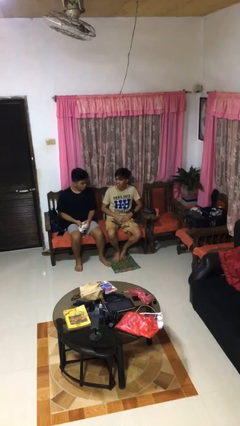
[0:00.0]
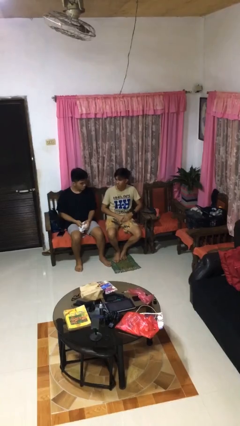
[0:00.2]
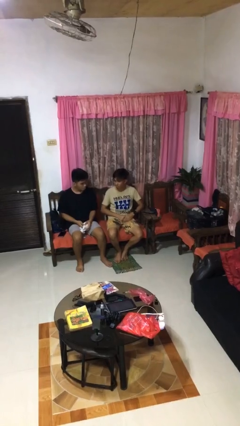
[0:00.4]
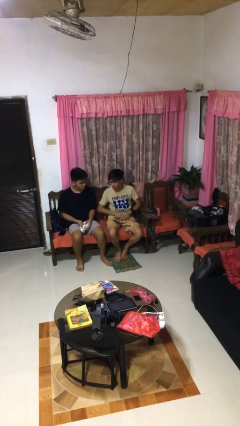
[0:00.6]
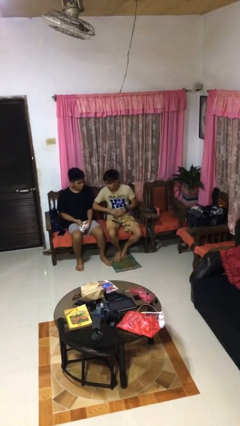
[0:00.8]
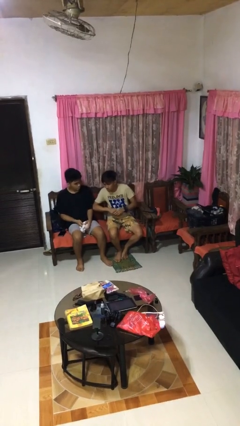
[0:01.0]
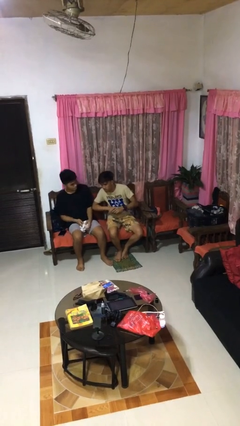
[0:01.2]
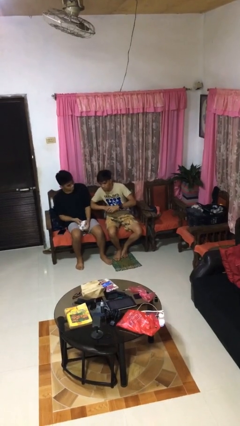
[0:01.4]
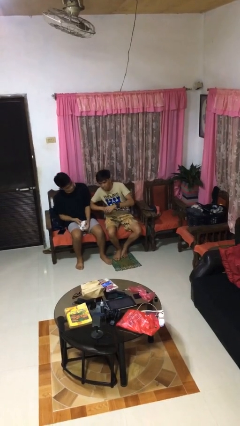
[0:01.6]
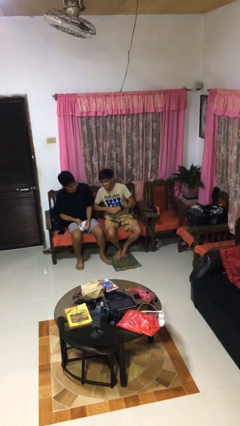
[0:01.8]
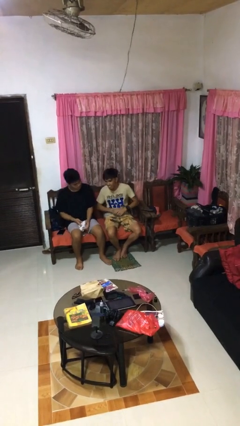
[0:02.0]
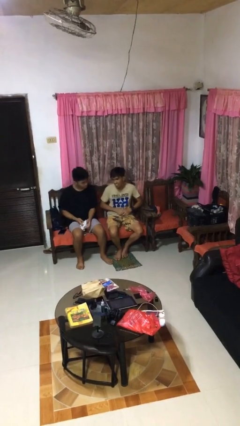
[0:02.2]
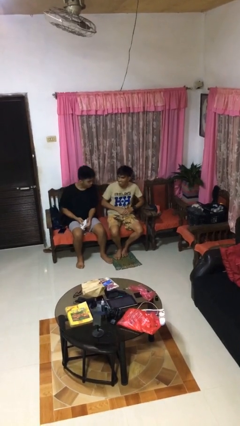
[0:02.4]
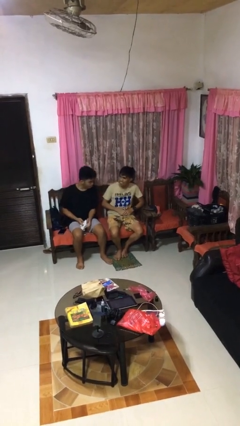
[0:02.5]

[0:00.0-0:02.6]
person nudges person with elbow

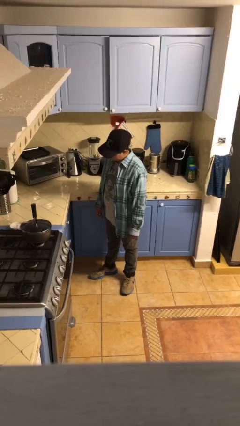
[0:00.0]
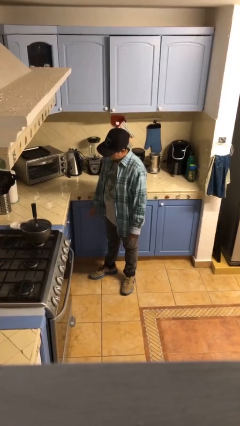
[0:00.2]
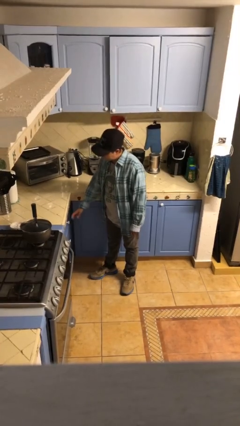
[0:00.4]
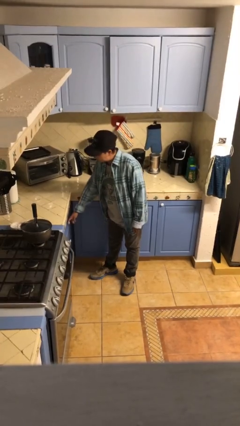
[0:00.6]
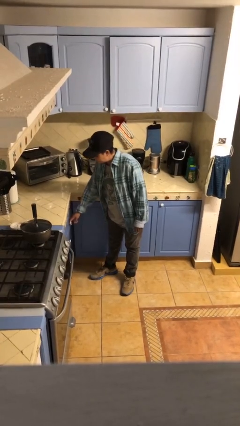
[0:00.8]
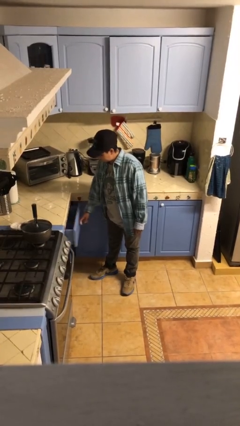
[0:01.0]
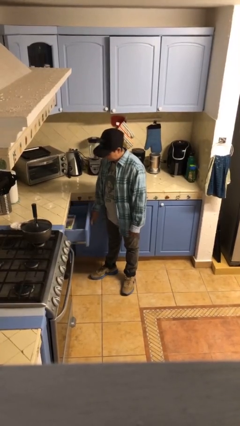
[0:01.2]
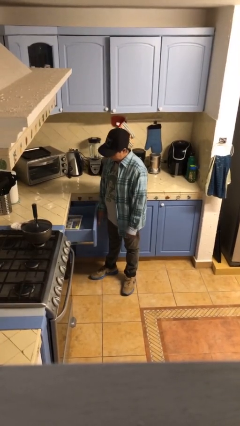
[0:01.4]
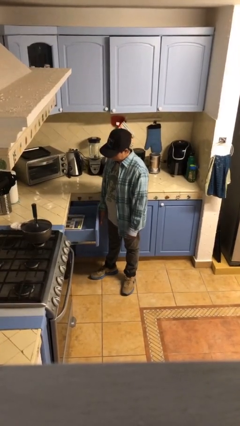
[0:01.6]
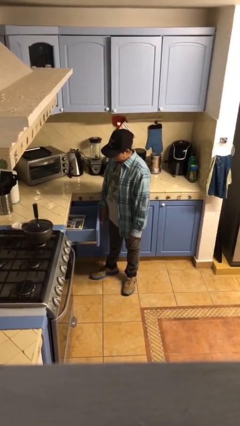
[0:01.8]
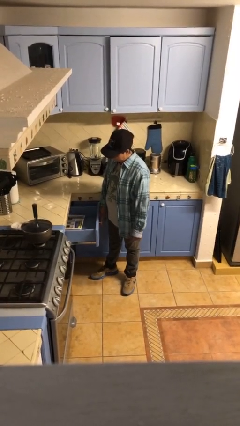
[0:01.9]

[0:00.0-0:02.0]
person opens kitchen drawer

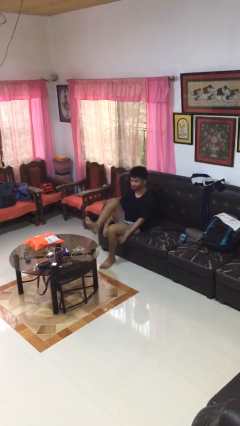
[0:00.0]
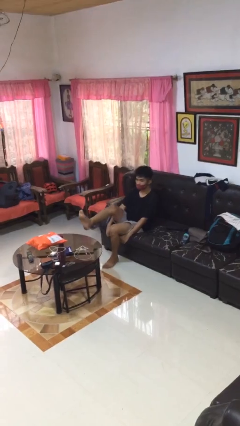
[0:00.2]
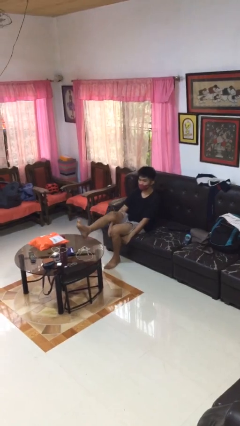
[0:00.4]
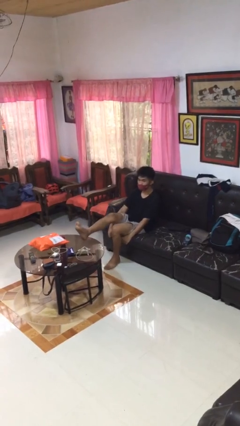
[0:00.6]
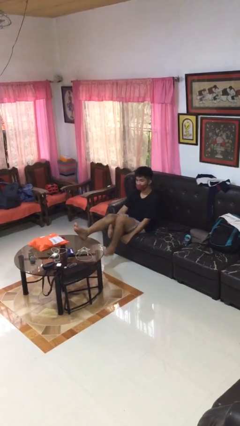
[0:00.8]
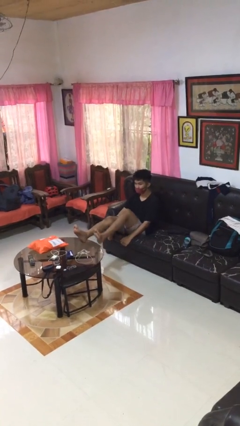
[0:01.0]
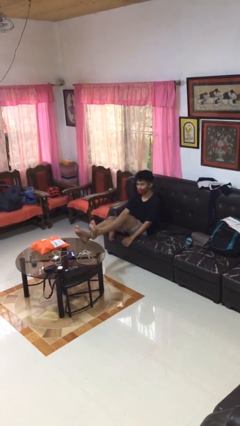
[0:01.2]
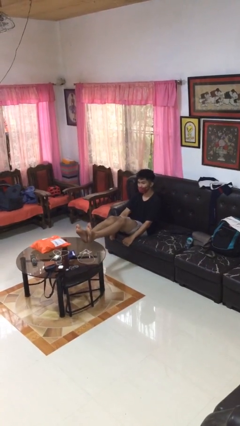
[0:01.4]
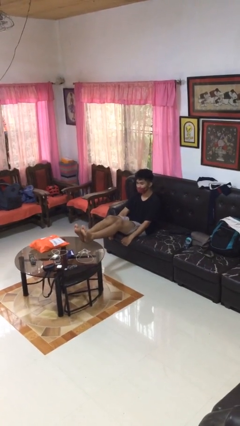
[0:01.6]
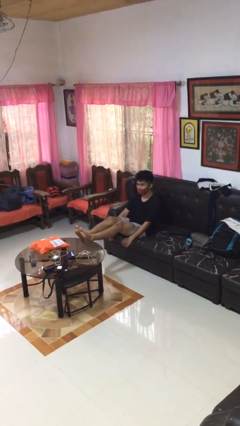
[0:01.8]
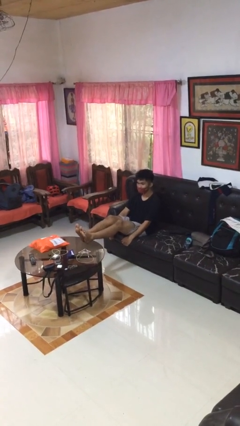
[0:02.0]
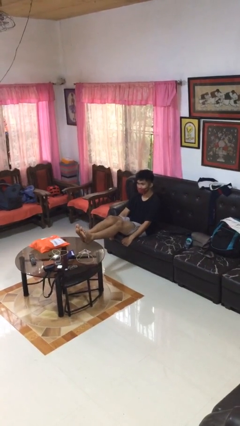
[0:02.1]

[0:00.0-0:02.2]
person puts feet up

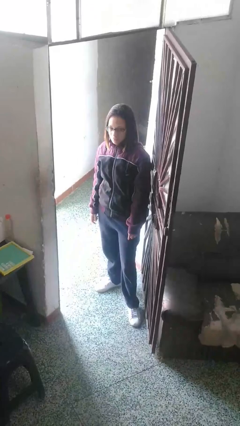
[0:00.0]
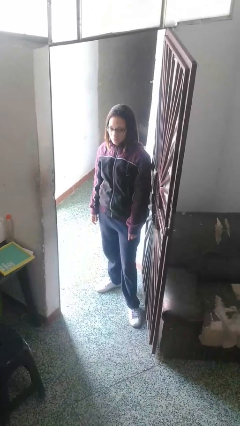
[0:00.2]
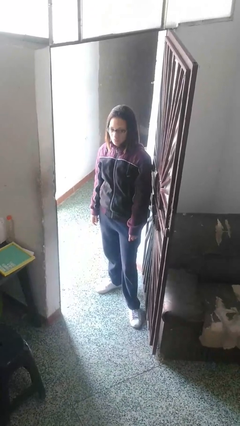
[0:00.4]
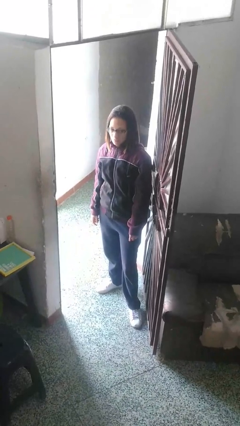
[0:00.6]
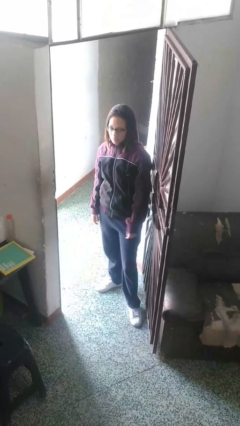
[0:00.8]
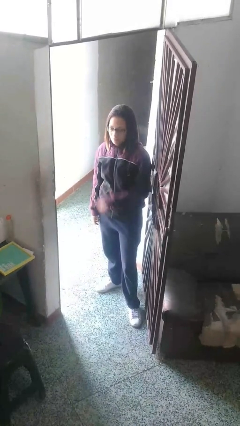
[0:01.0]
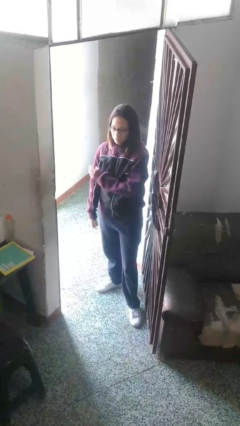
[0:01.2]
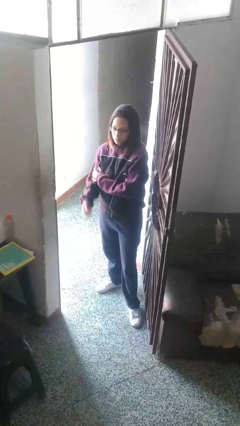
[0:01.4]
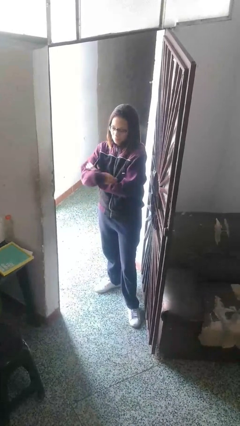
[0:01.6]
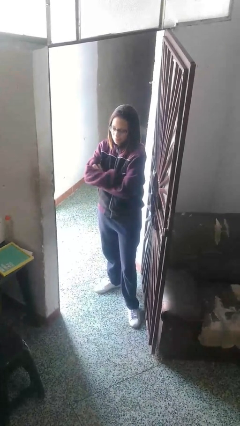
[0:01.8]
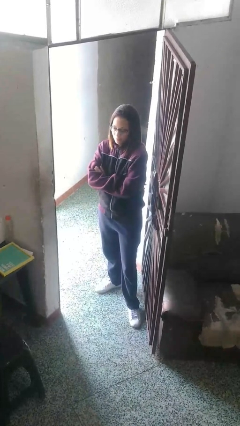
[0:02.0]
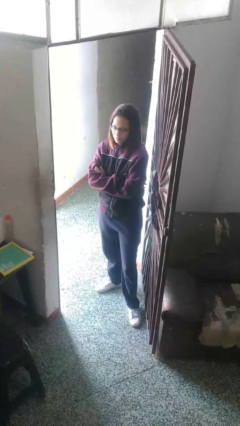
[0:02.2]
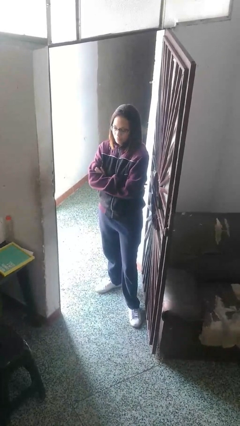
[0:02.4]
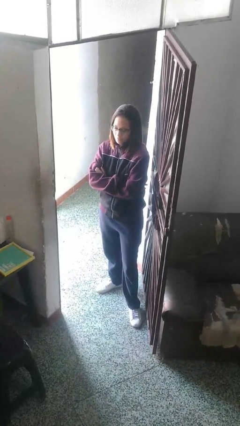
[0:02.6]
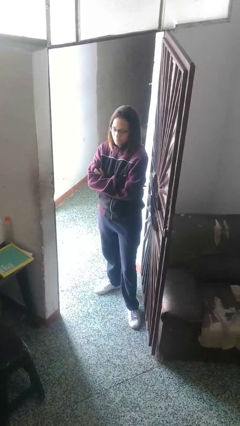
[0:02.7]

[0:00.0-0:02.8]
person gestures arms x

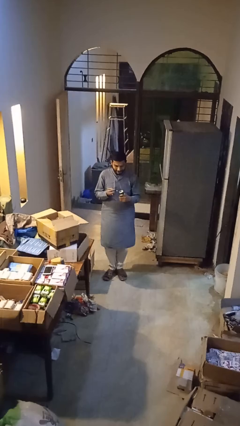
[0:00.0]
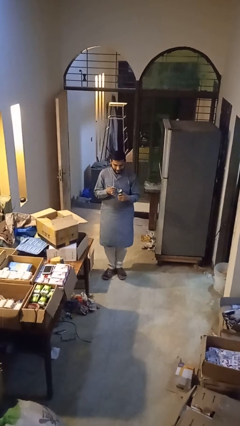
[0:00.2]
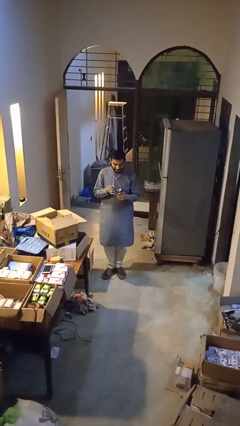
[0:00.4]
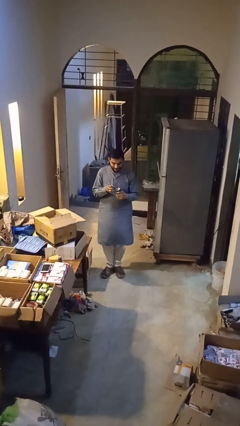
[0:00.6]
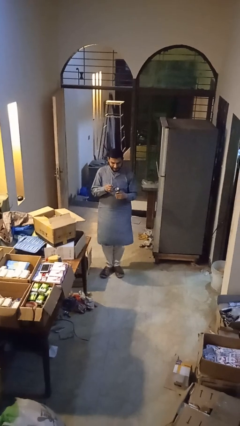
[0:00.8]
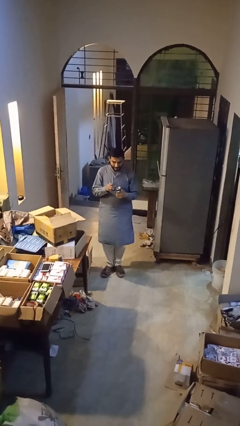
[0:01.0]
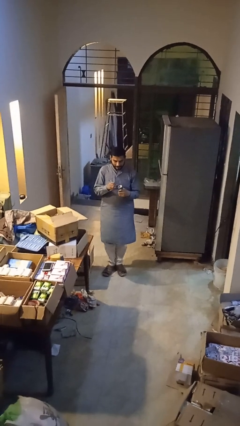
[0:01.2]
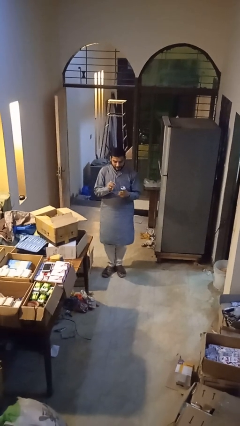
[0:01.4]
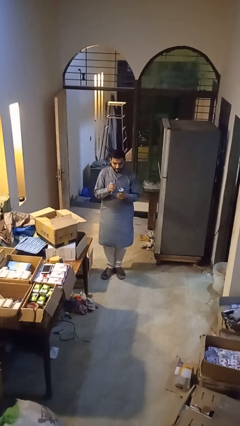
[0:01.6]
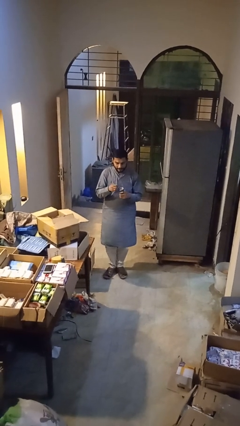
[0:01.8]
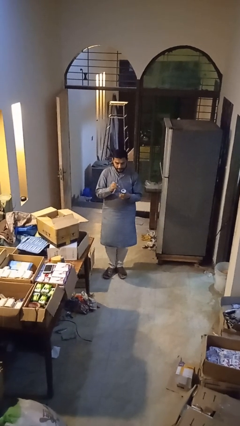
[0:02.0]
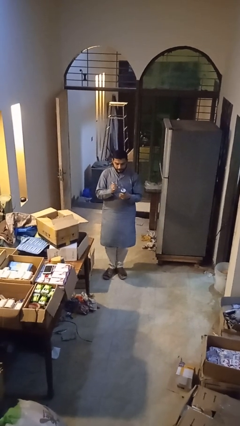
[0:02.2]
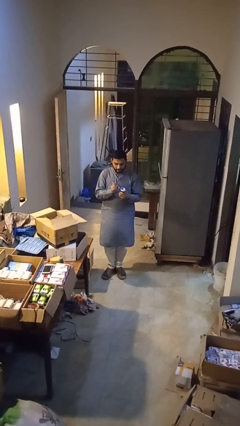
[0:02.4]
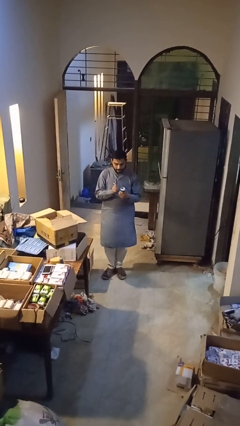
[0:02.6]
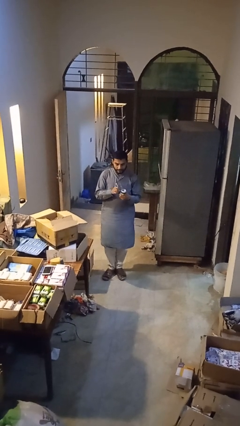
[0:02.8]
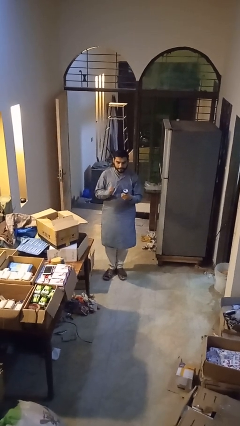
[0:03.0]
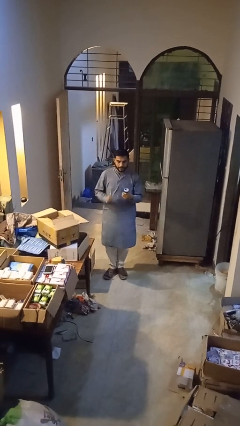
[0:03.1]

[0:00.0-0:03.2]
person opens can with can opener

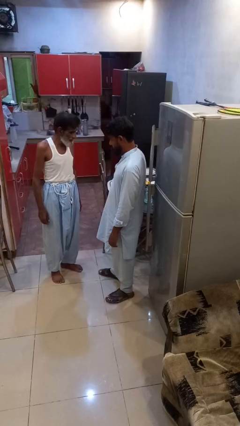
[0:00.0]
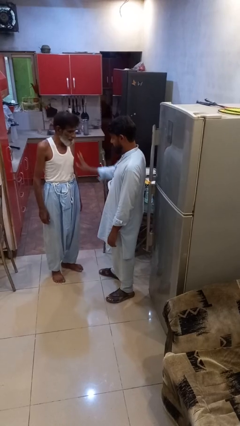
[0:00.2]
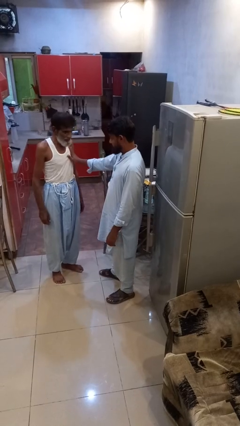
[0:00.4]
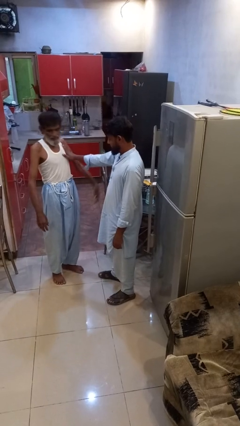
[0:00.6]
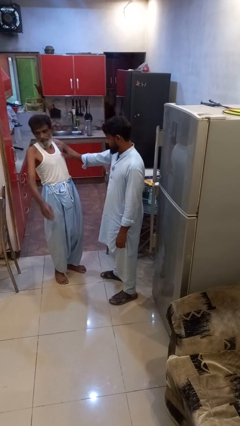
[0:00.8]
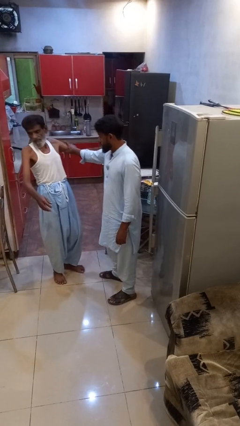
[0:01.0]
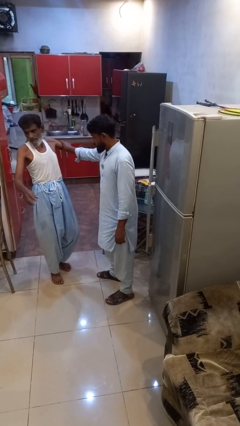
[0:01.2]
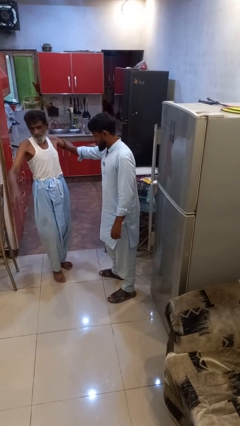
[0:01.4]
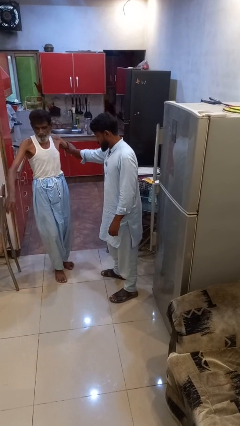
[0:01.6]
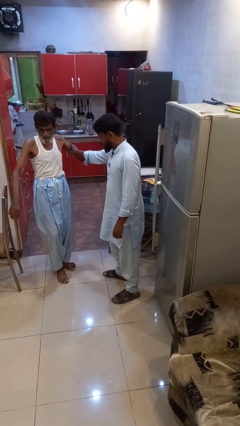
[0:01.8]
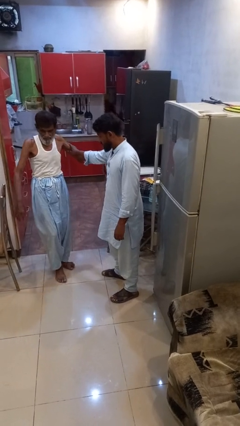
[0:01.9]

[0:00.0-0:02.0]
person shoves person

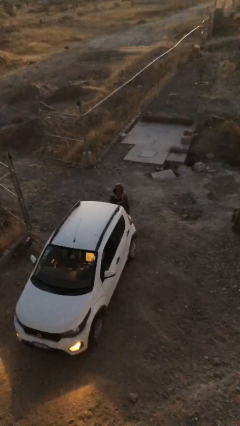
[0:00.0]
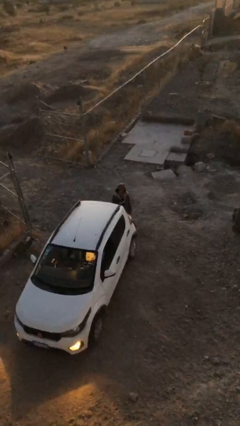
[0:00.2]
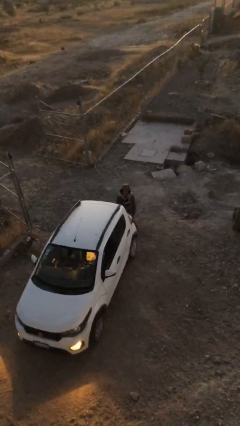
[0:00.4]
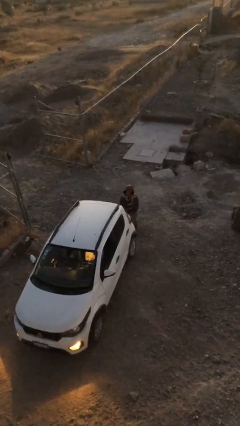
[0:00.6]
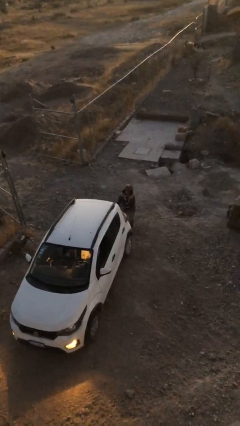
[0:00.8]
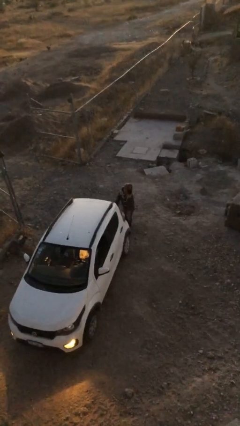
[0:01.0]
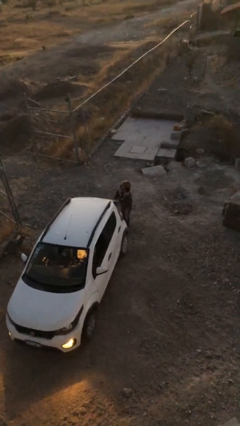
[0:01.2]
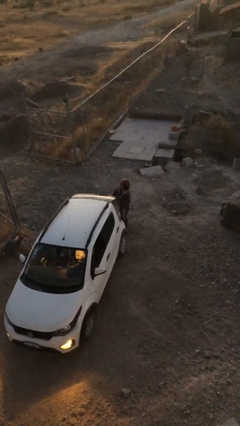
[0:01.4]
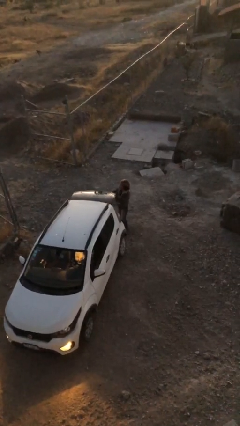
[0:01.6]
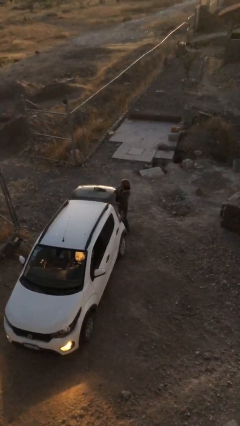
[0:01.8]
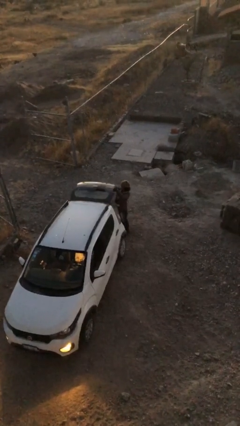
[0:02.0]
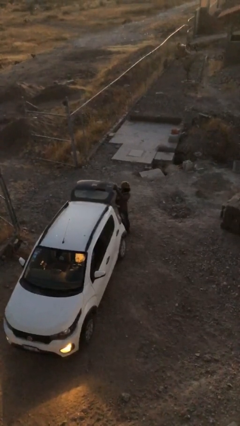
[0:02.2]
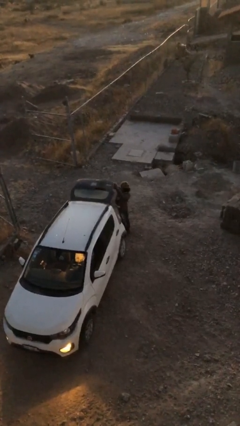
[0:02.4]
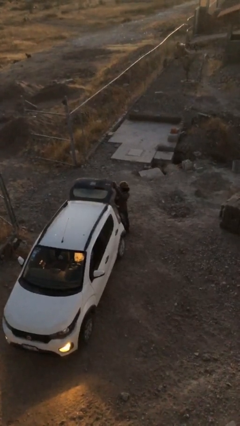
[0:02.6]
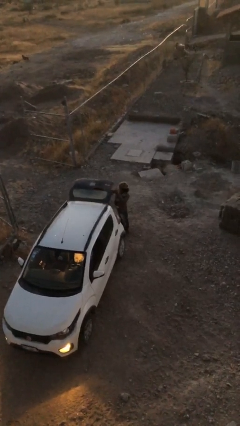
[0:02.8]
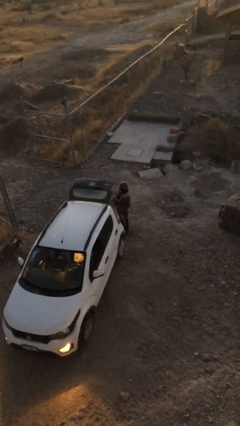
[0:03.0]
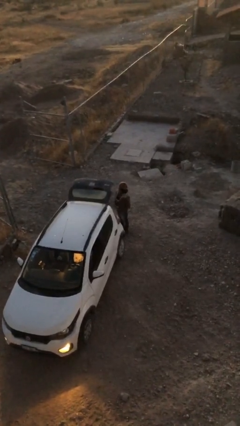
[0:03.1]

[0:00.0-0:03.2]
person opens car trunk
